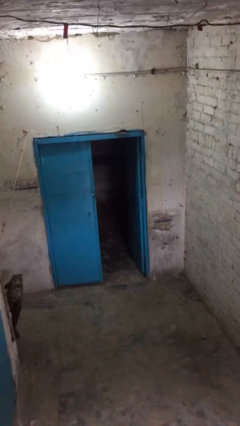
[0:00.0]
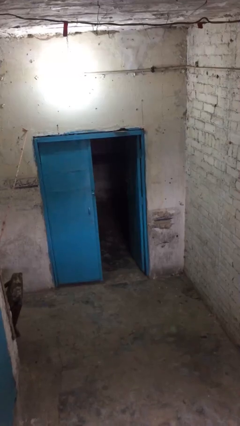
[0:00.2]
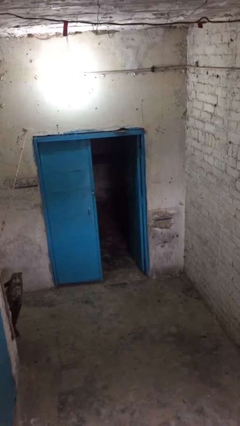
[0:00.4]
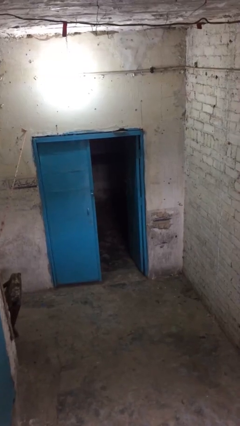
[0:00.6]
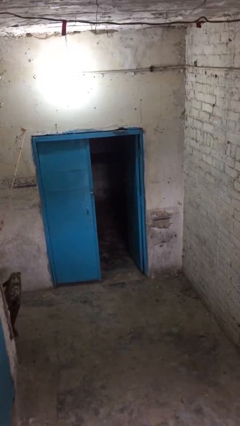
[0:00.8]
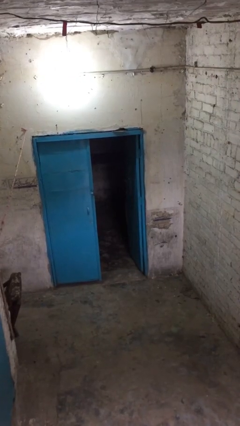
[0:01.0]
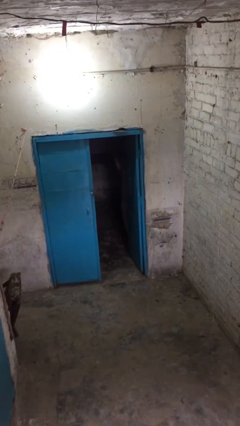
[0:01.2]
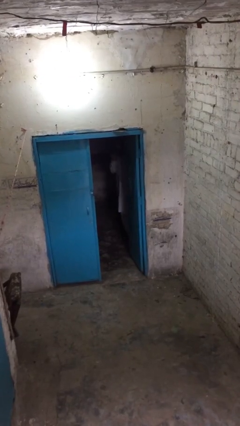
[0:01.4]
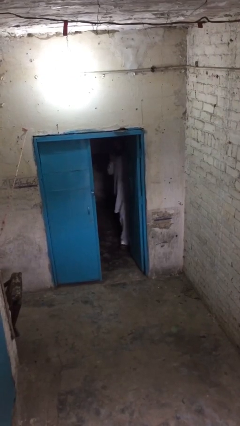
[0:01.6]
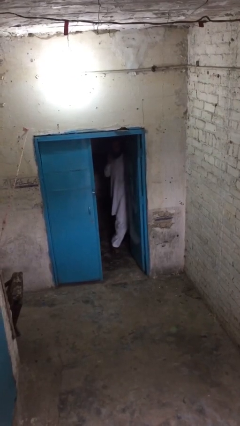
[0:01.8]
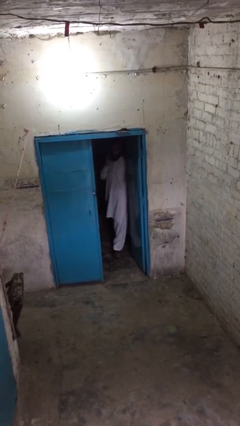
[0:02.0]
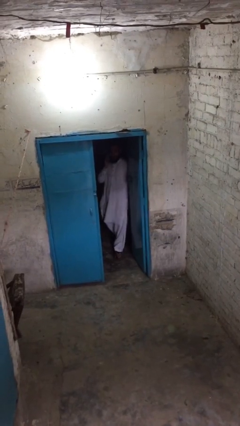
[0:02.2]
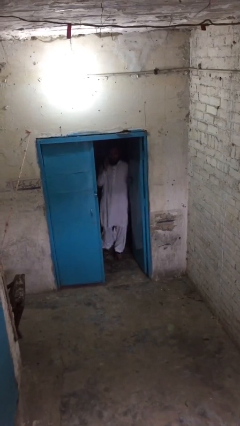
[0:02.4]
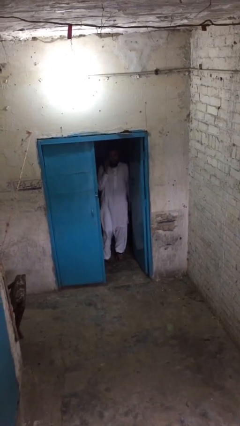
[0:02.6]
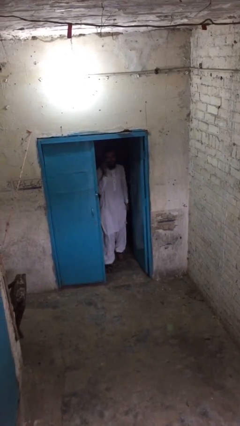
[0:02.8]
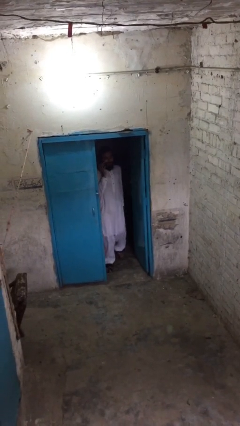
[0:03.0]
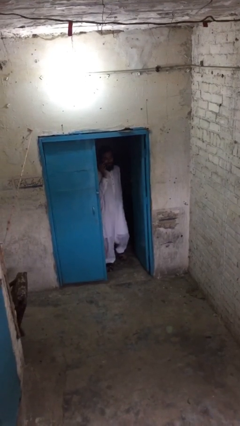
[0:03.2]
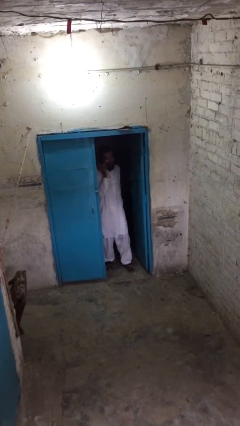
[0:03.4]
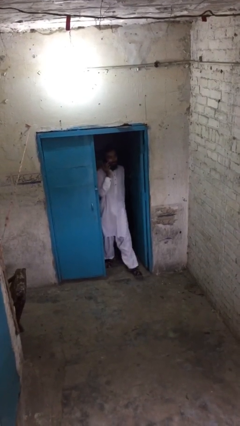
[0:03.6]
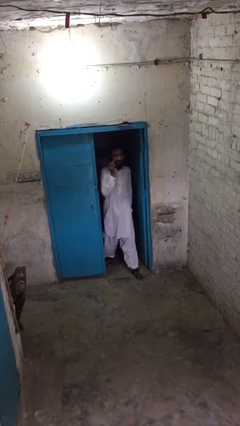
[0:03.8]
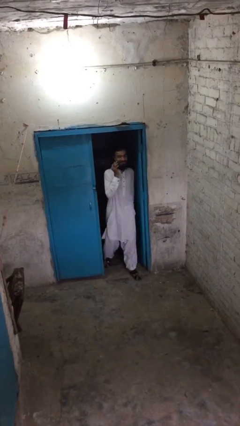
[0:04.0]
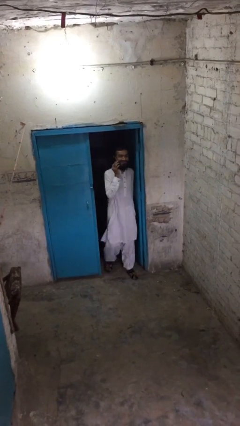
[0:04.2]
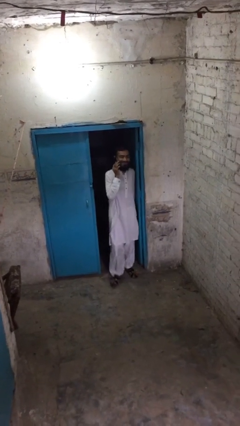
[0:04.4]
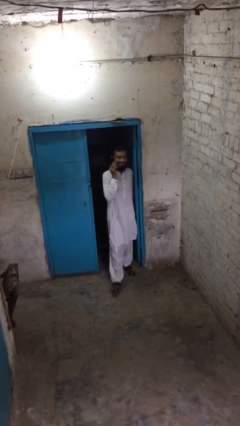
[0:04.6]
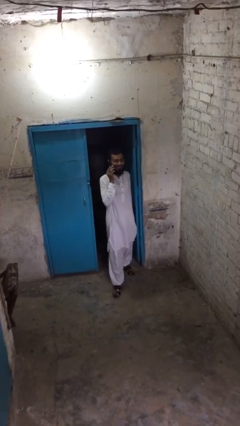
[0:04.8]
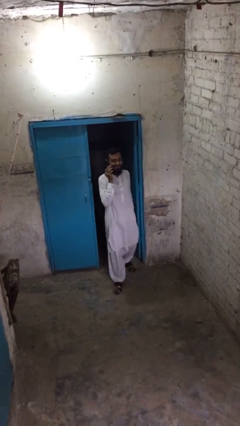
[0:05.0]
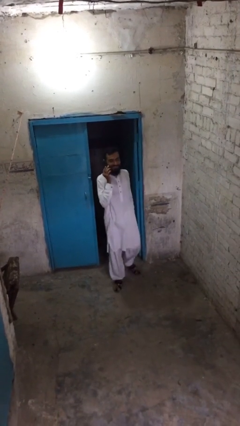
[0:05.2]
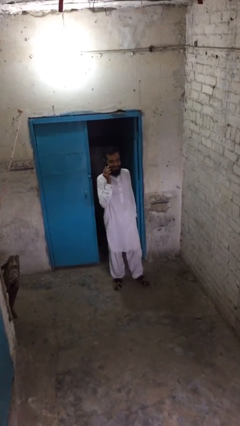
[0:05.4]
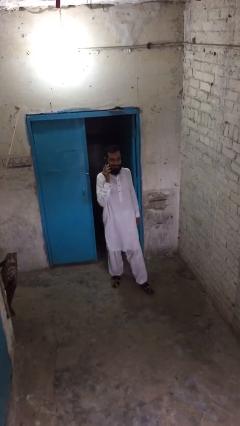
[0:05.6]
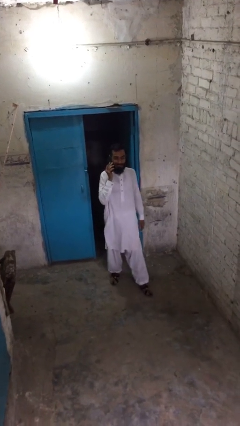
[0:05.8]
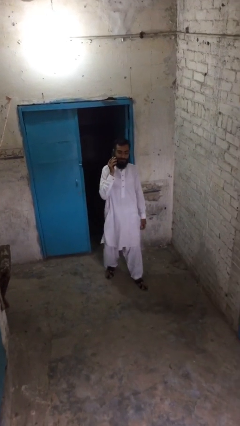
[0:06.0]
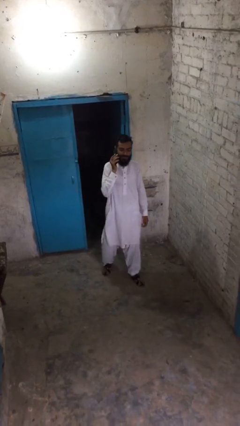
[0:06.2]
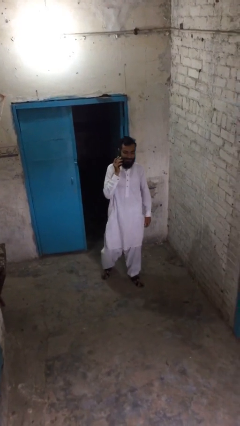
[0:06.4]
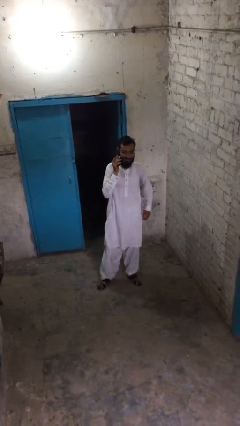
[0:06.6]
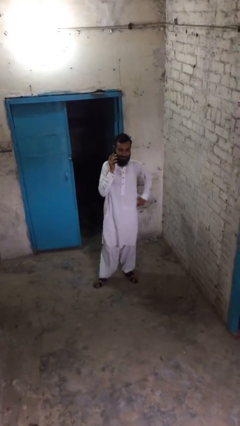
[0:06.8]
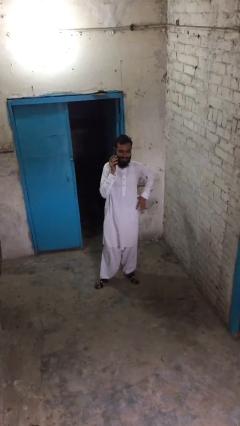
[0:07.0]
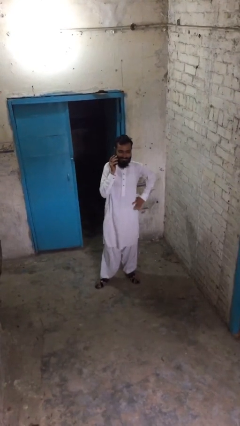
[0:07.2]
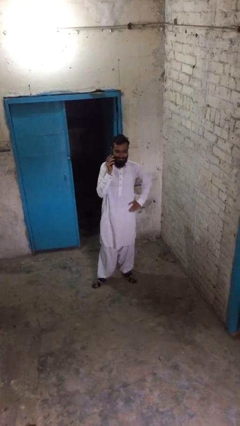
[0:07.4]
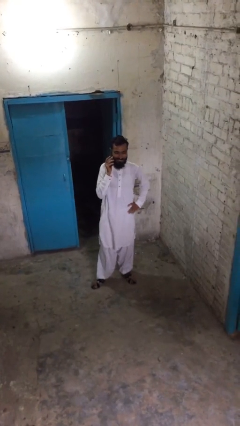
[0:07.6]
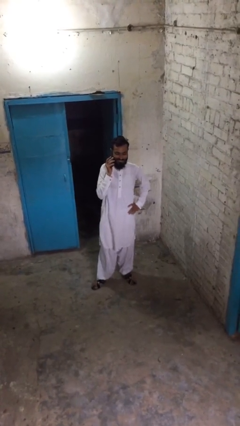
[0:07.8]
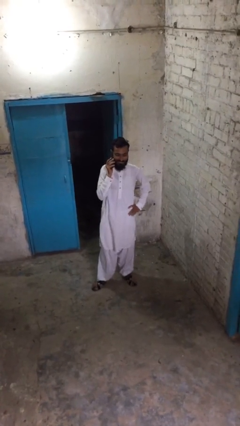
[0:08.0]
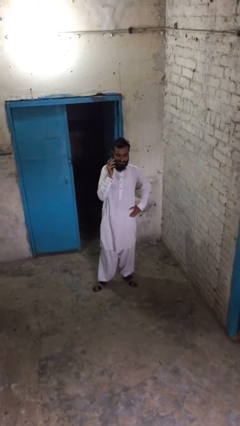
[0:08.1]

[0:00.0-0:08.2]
person enters scene through structure

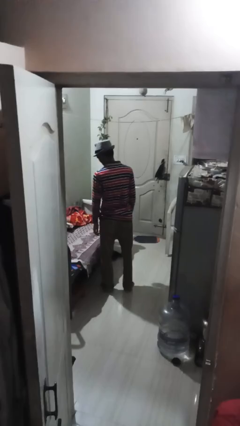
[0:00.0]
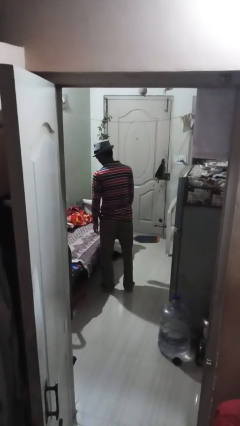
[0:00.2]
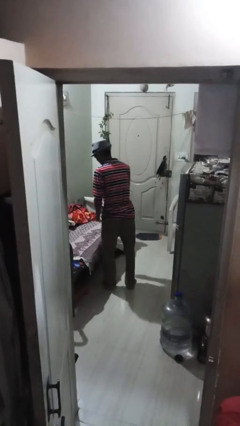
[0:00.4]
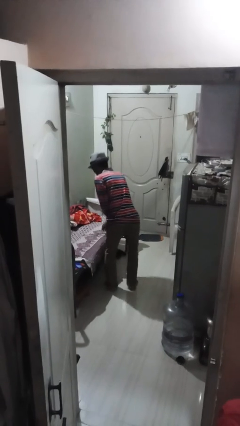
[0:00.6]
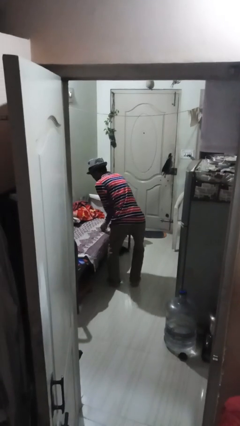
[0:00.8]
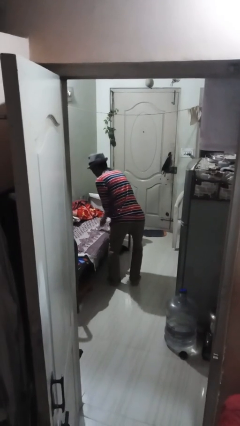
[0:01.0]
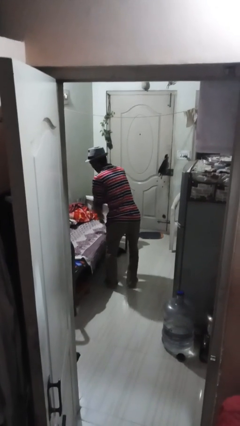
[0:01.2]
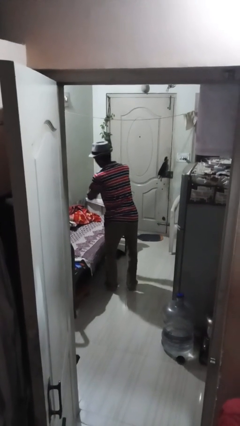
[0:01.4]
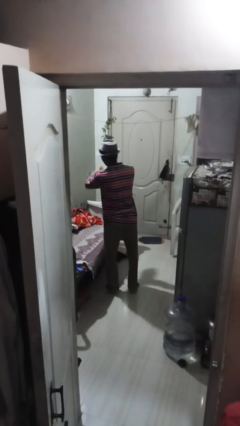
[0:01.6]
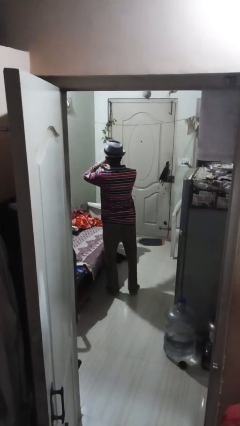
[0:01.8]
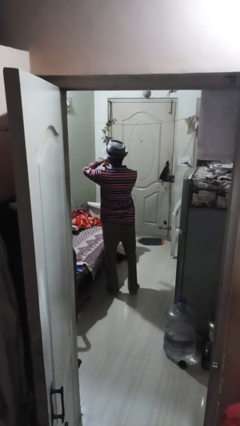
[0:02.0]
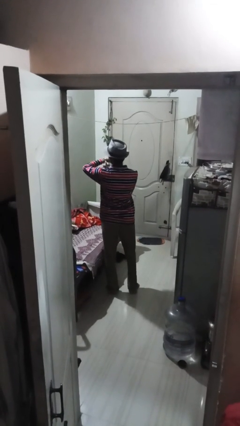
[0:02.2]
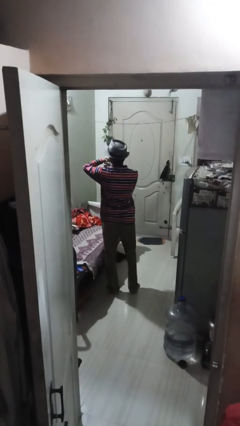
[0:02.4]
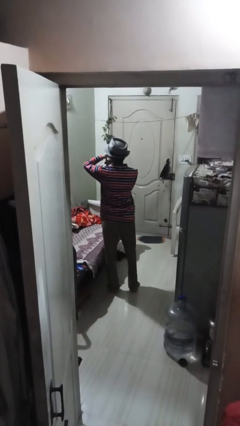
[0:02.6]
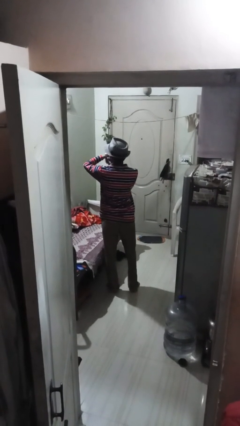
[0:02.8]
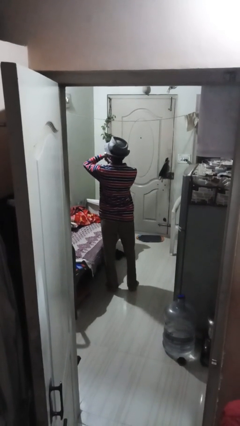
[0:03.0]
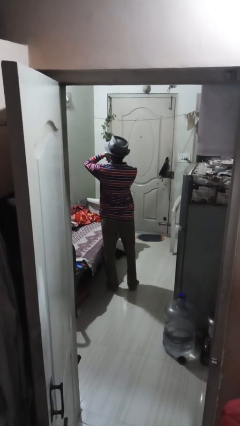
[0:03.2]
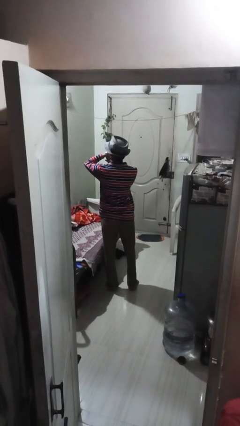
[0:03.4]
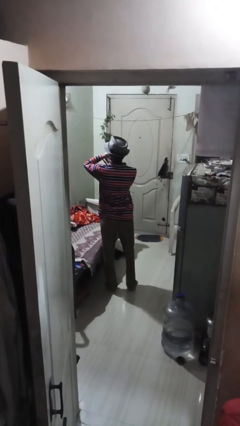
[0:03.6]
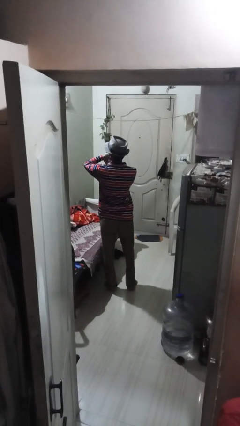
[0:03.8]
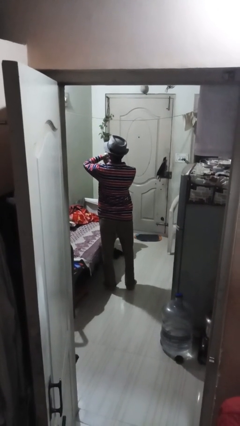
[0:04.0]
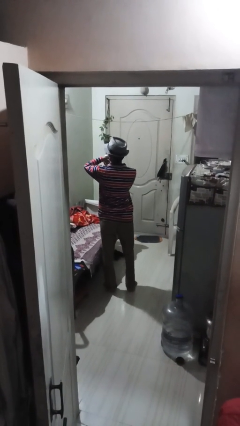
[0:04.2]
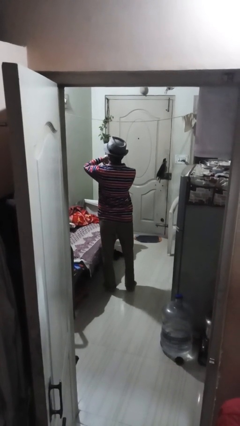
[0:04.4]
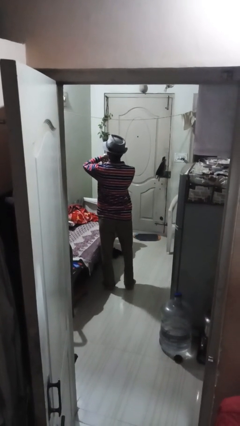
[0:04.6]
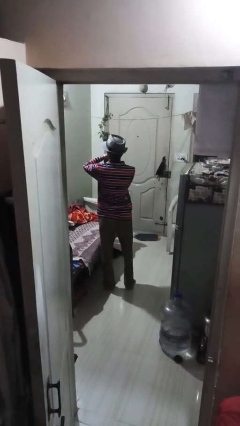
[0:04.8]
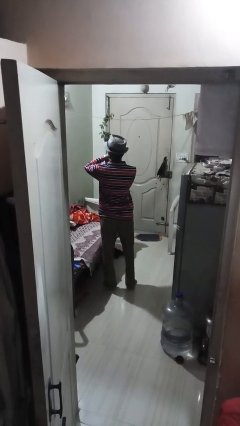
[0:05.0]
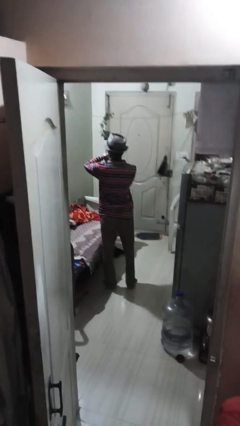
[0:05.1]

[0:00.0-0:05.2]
person puts on wristwatch

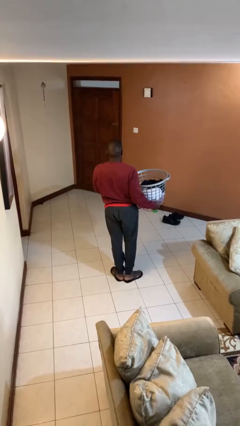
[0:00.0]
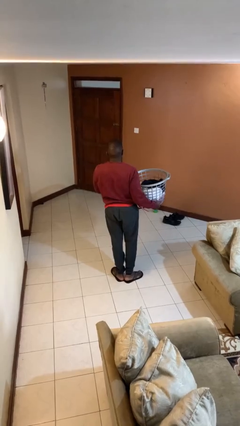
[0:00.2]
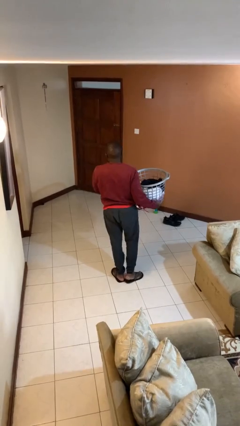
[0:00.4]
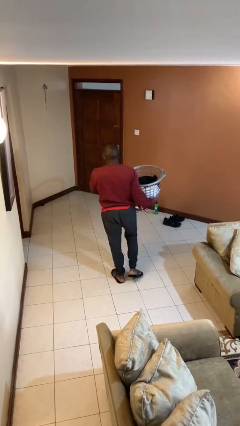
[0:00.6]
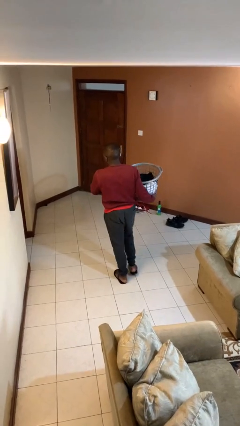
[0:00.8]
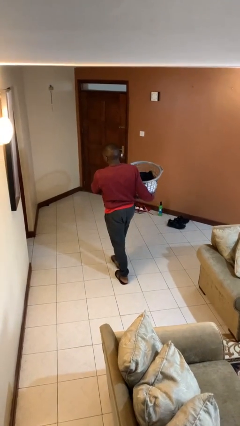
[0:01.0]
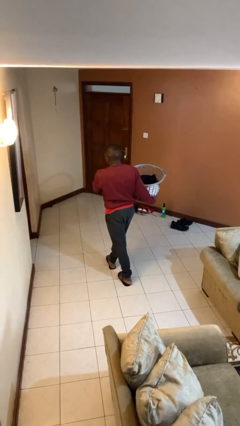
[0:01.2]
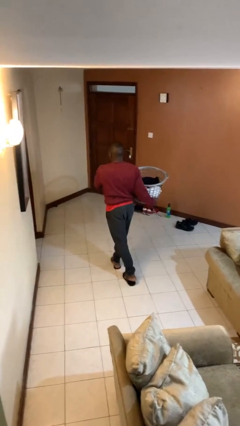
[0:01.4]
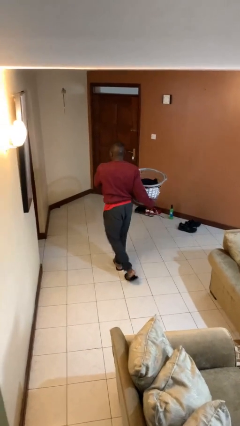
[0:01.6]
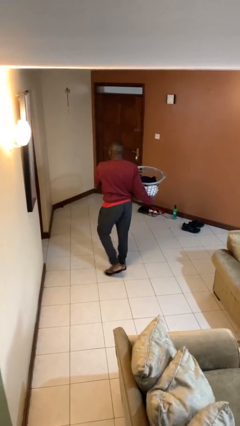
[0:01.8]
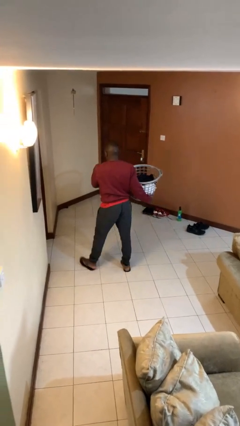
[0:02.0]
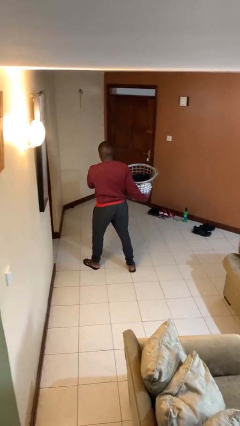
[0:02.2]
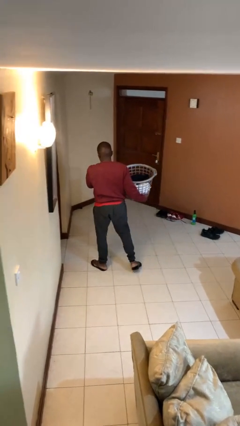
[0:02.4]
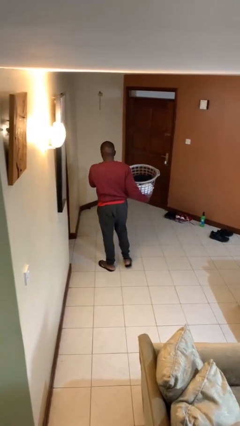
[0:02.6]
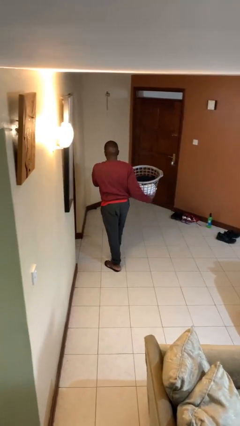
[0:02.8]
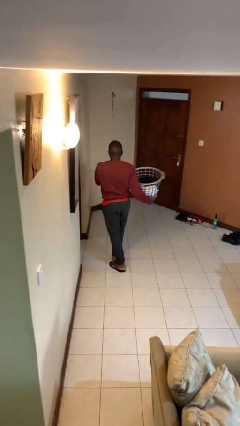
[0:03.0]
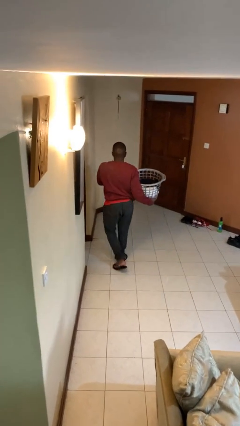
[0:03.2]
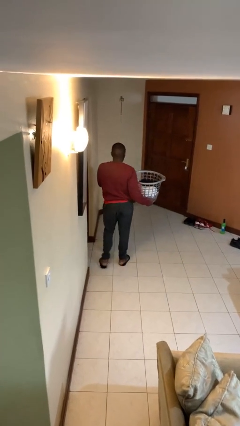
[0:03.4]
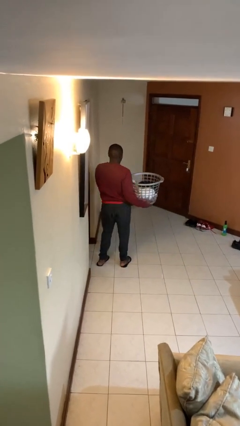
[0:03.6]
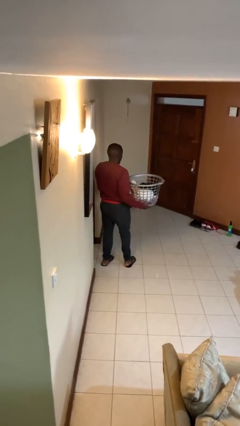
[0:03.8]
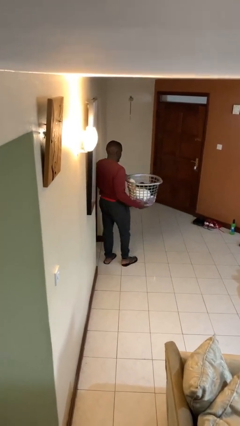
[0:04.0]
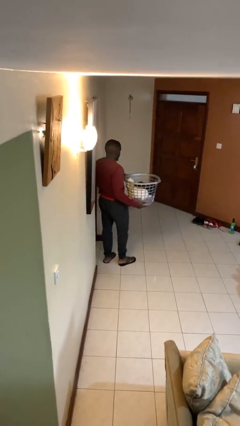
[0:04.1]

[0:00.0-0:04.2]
person carries laundry basket
